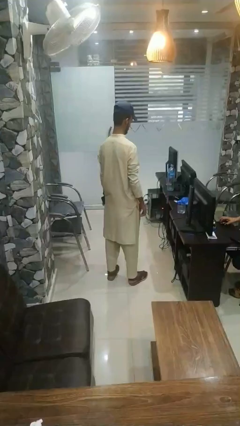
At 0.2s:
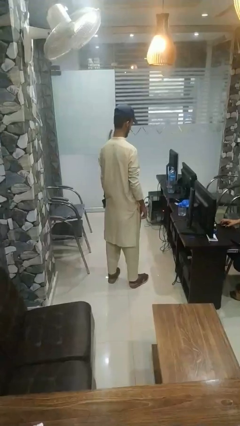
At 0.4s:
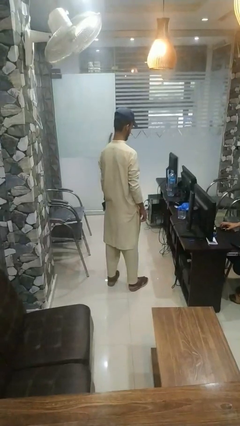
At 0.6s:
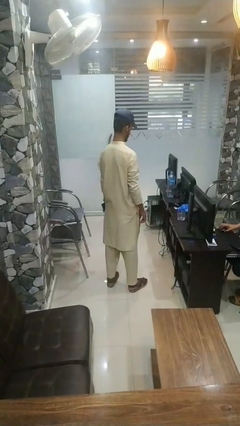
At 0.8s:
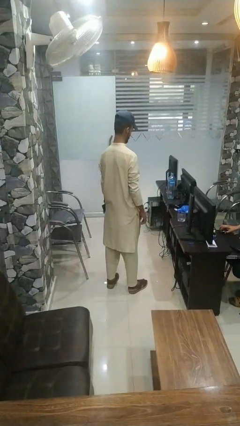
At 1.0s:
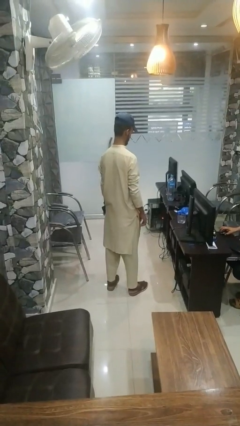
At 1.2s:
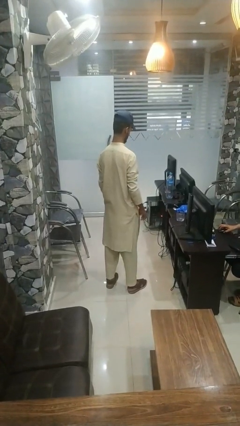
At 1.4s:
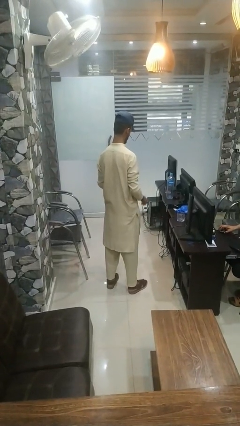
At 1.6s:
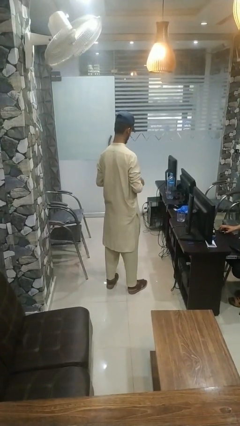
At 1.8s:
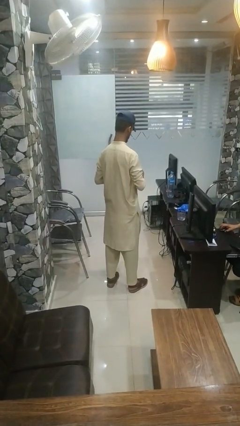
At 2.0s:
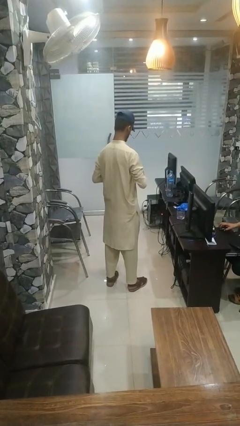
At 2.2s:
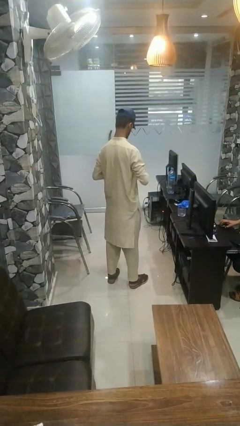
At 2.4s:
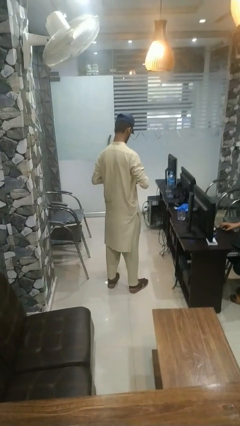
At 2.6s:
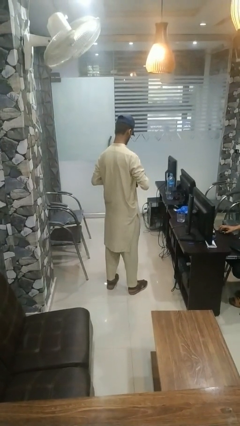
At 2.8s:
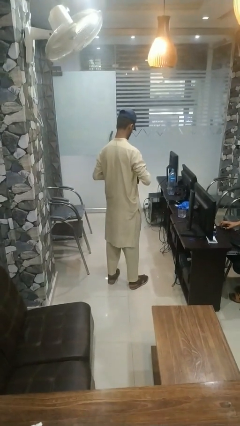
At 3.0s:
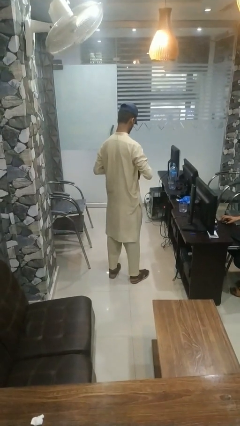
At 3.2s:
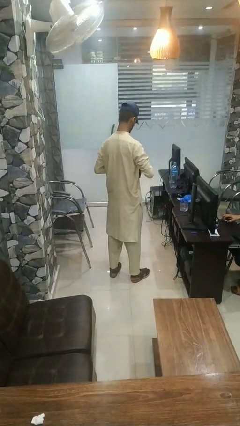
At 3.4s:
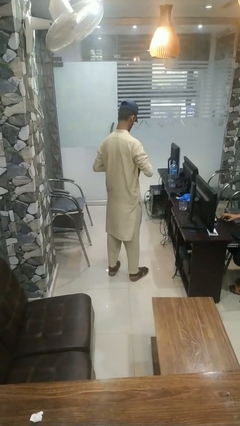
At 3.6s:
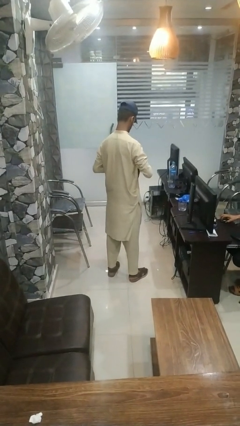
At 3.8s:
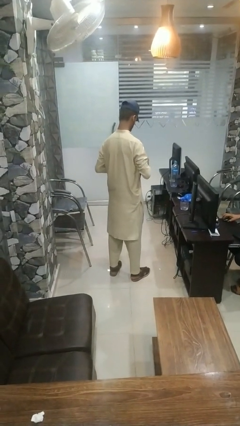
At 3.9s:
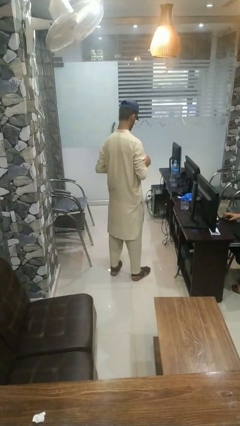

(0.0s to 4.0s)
person searches in purse

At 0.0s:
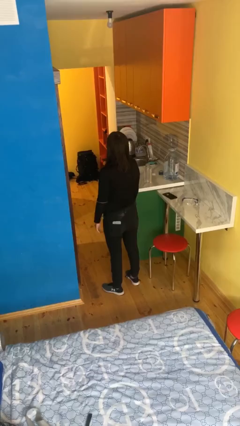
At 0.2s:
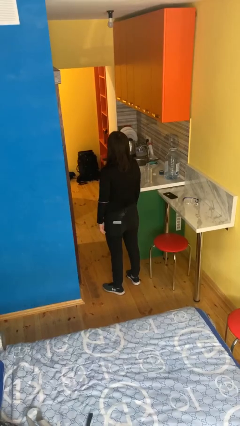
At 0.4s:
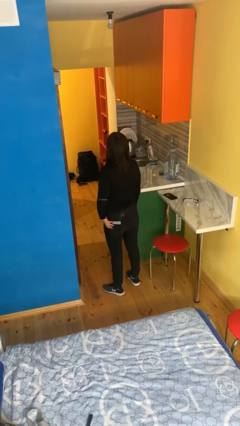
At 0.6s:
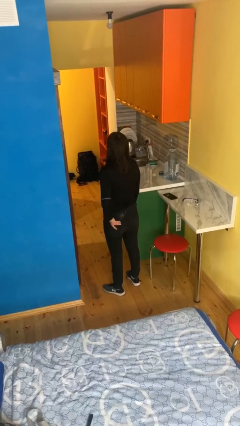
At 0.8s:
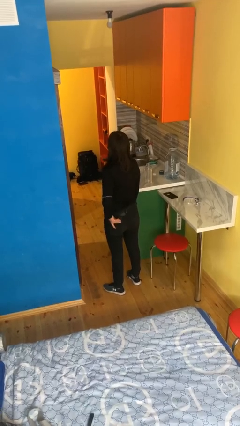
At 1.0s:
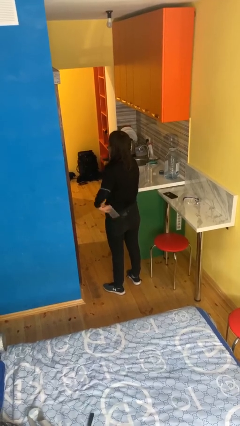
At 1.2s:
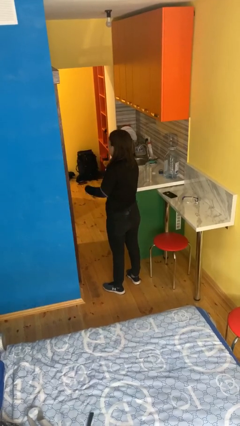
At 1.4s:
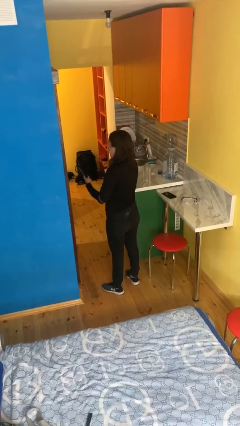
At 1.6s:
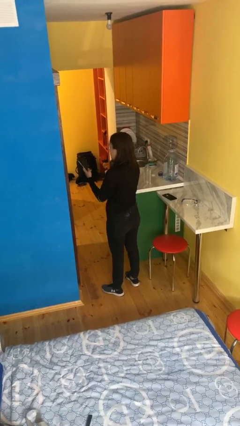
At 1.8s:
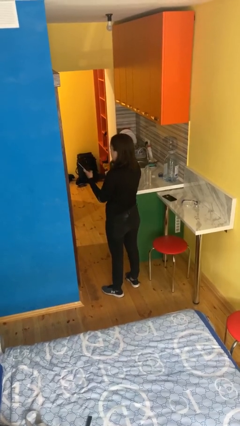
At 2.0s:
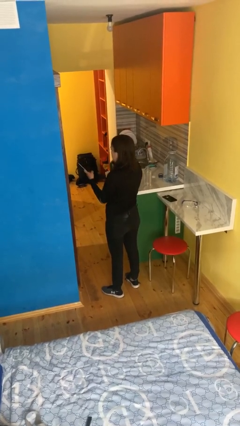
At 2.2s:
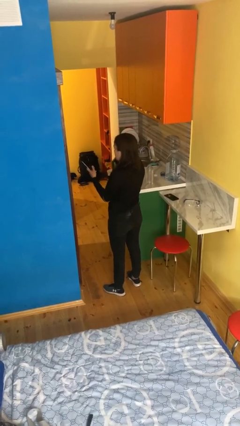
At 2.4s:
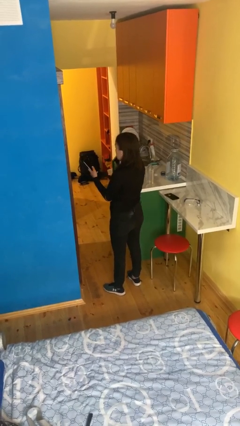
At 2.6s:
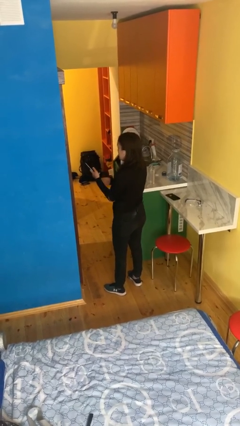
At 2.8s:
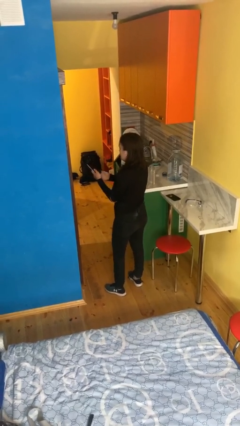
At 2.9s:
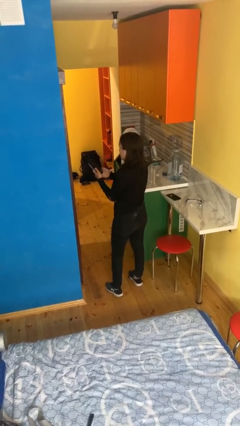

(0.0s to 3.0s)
person takes phone from pocket

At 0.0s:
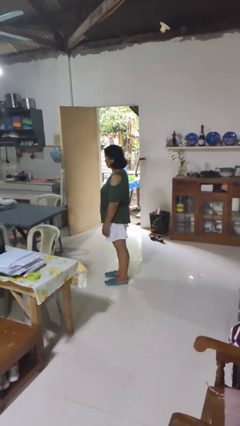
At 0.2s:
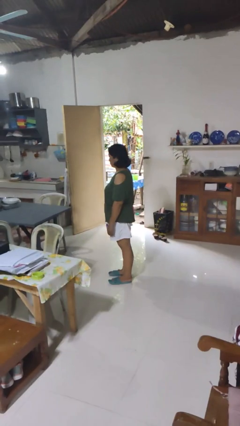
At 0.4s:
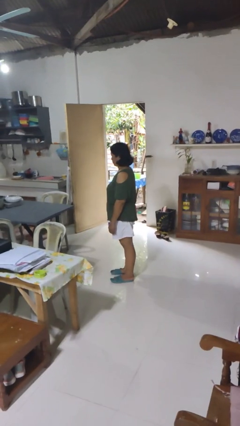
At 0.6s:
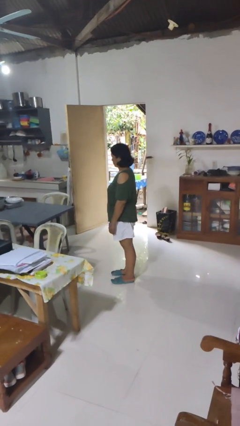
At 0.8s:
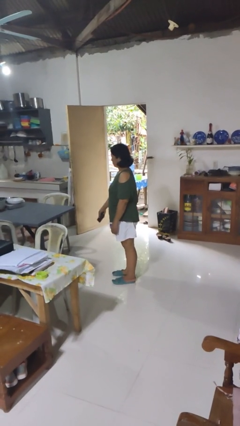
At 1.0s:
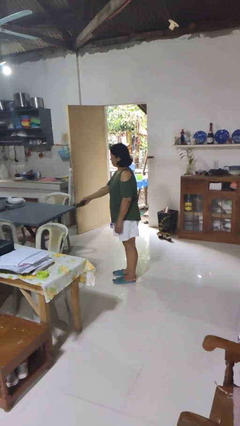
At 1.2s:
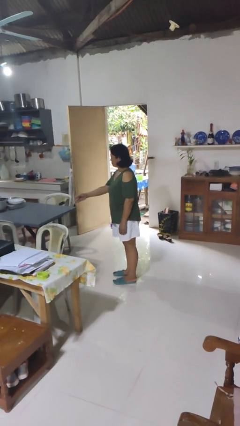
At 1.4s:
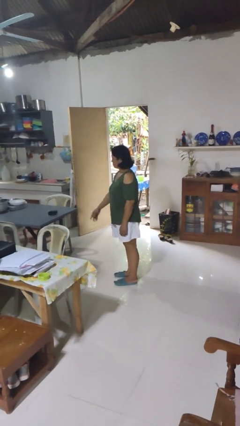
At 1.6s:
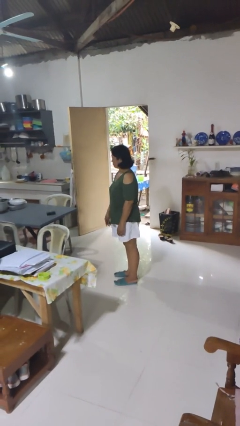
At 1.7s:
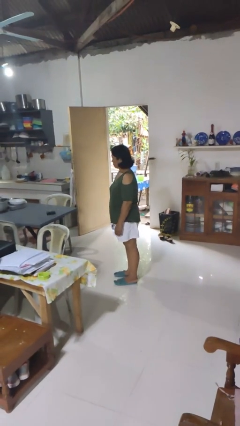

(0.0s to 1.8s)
person throws object on table

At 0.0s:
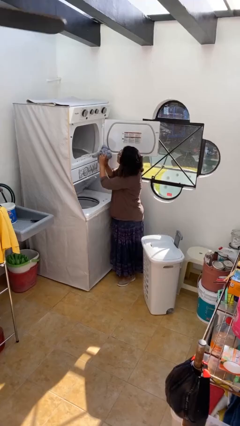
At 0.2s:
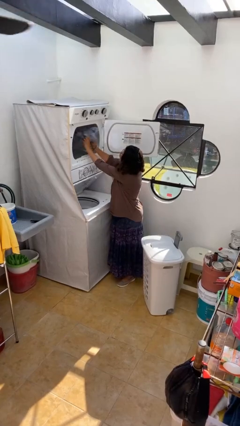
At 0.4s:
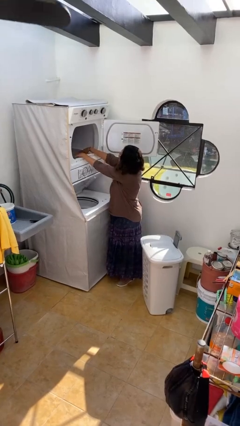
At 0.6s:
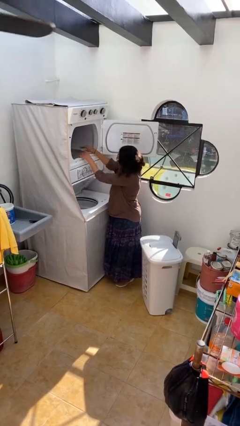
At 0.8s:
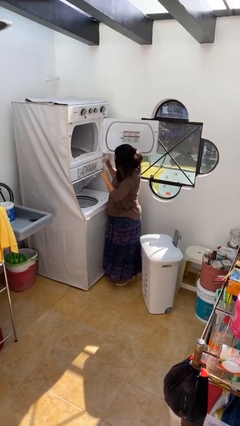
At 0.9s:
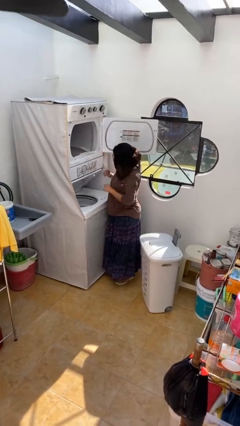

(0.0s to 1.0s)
person loads dryer

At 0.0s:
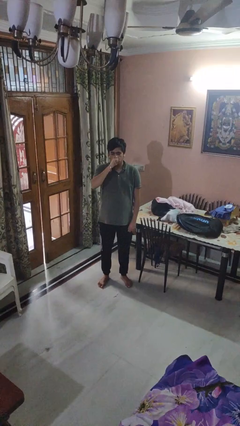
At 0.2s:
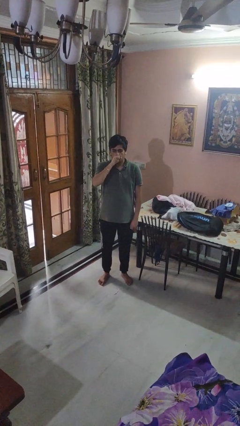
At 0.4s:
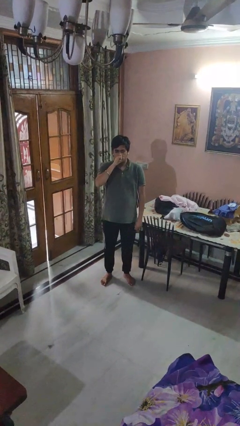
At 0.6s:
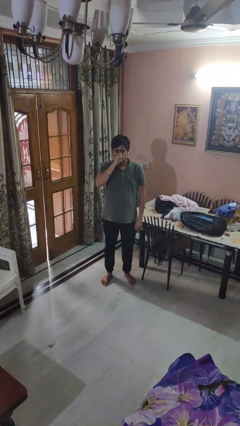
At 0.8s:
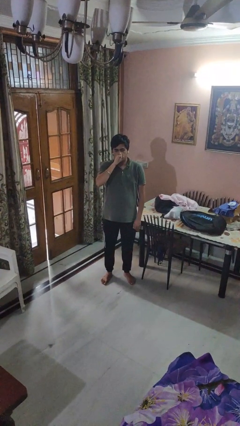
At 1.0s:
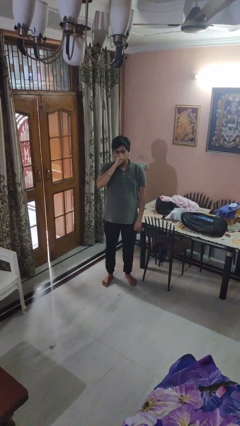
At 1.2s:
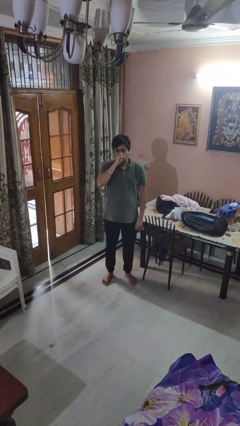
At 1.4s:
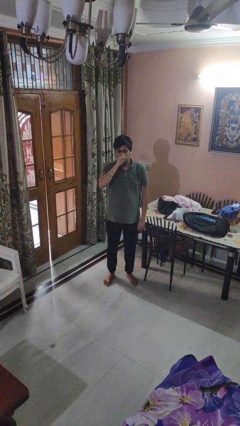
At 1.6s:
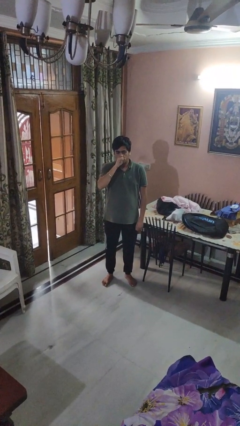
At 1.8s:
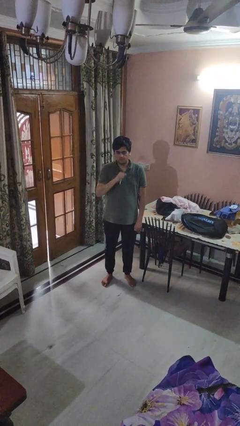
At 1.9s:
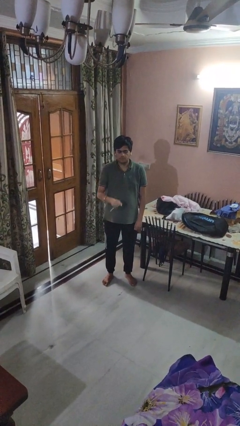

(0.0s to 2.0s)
person vapes

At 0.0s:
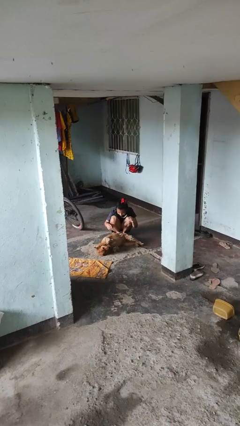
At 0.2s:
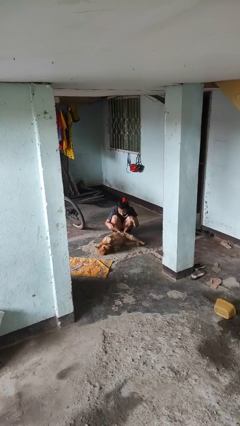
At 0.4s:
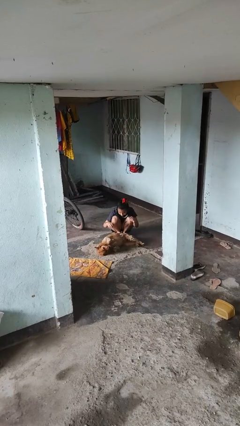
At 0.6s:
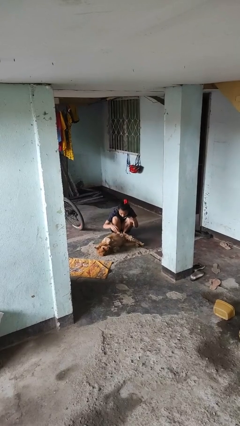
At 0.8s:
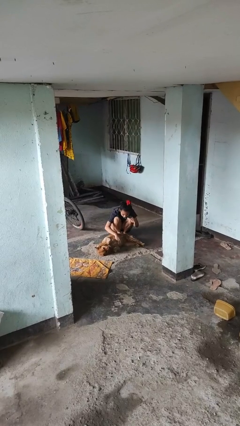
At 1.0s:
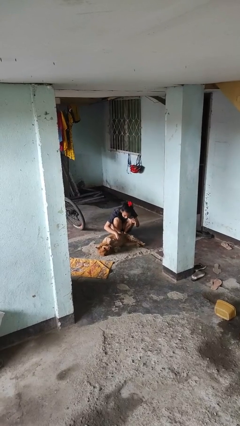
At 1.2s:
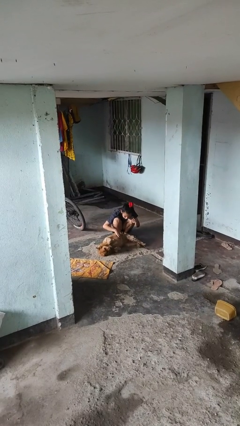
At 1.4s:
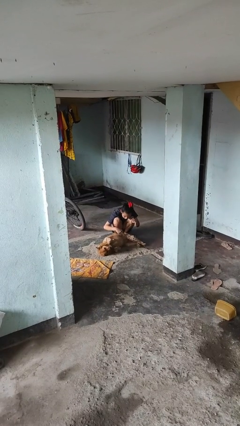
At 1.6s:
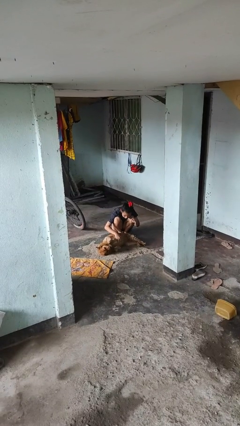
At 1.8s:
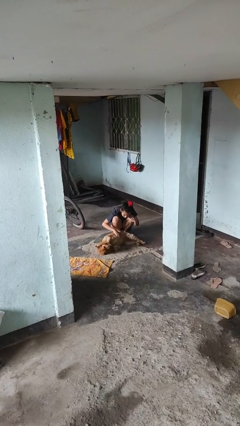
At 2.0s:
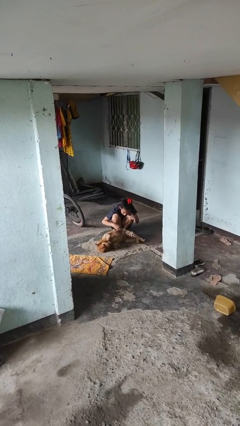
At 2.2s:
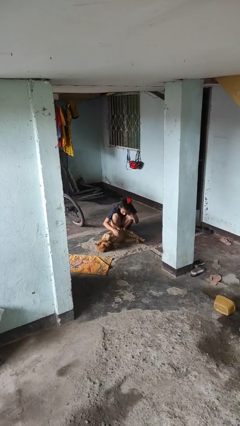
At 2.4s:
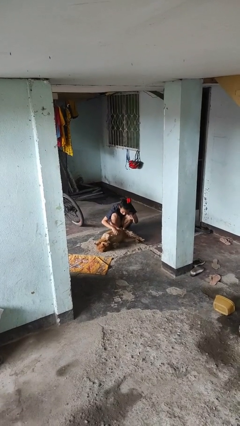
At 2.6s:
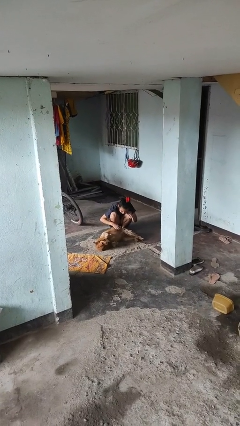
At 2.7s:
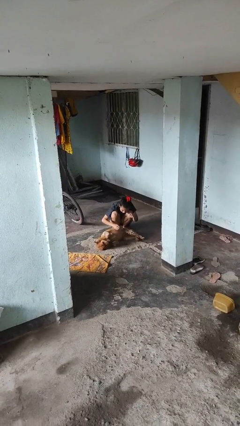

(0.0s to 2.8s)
person pets dog

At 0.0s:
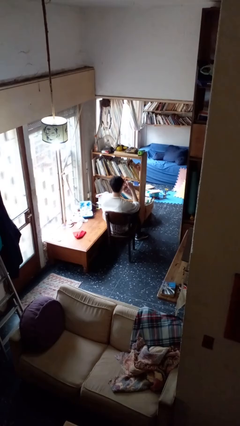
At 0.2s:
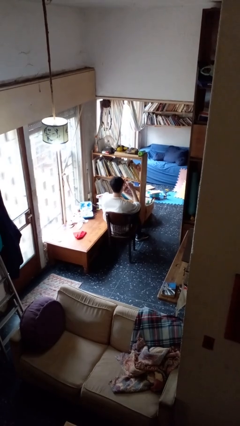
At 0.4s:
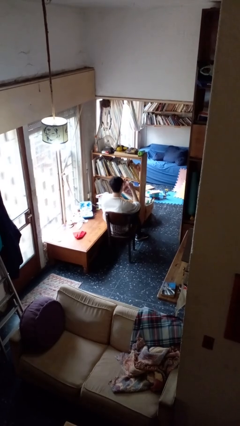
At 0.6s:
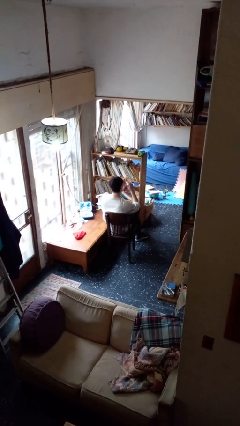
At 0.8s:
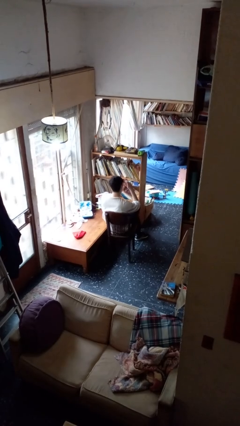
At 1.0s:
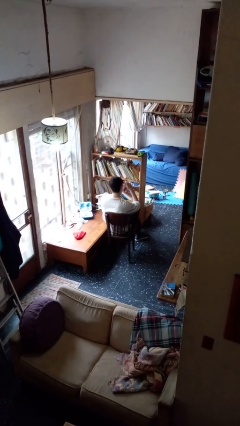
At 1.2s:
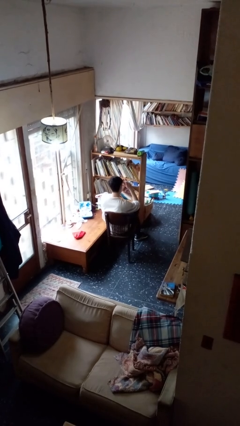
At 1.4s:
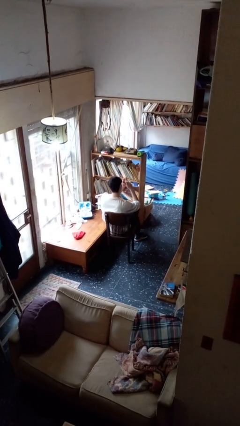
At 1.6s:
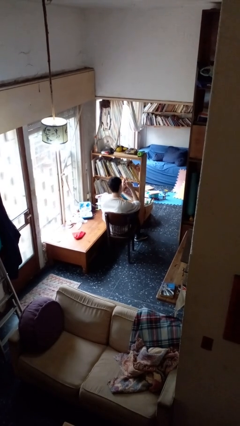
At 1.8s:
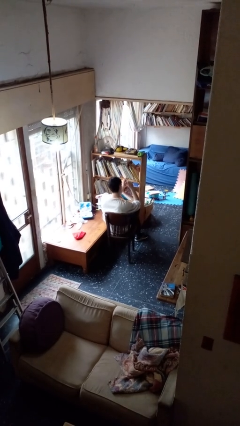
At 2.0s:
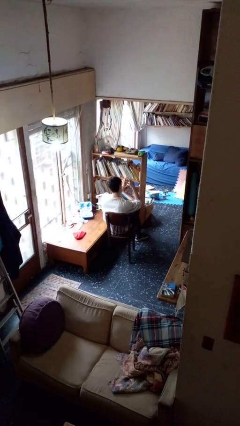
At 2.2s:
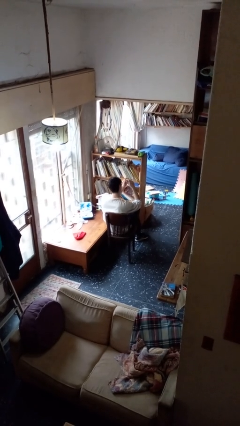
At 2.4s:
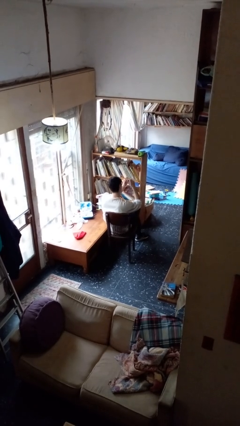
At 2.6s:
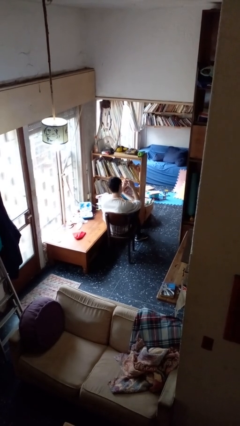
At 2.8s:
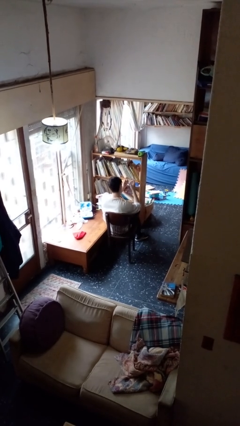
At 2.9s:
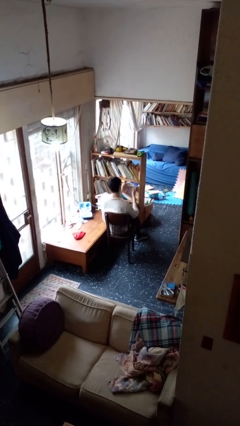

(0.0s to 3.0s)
person clips fingernails
